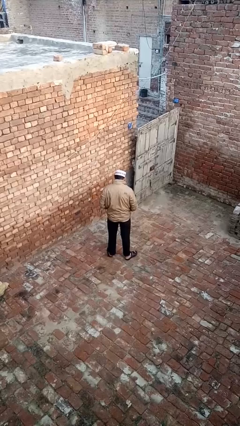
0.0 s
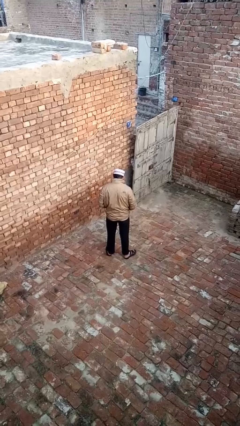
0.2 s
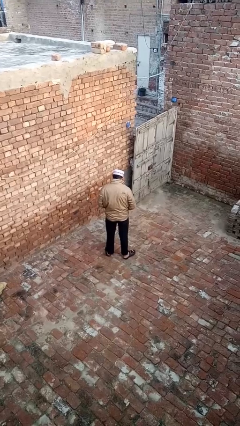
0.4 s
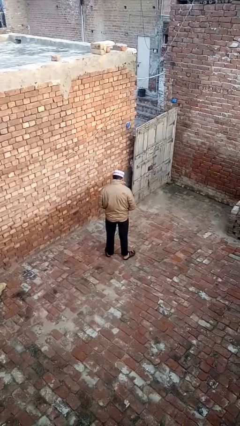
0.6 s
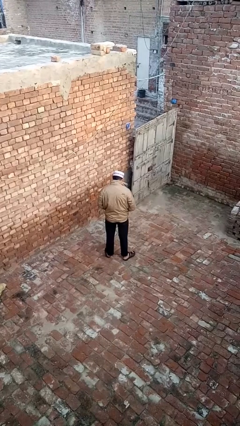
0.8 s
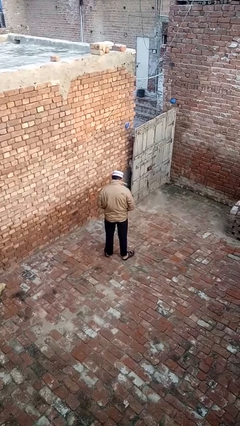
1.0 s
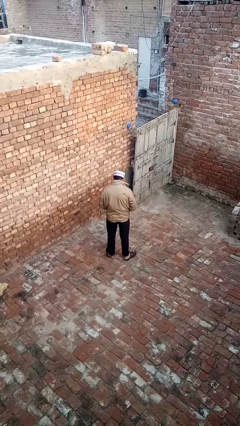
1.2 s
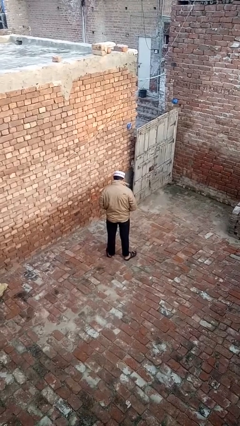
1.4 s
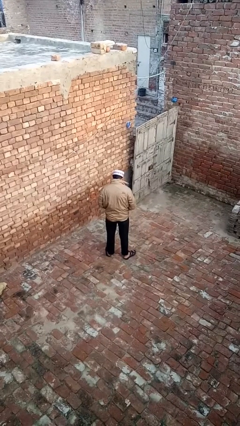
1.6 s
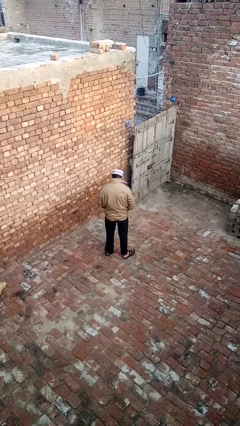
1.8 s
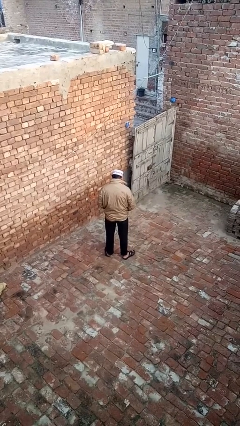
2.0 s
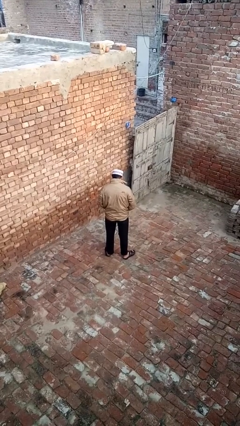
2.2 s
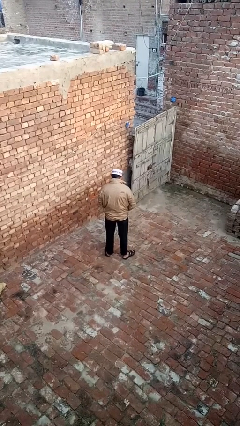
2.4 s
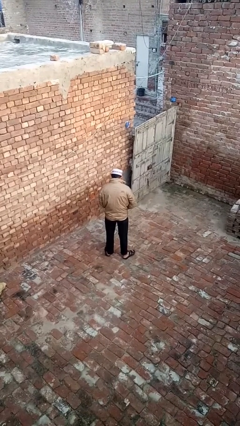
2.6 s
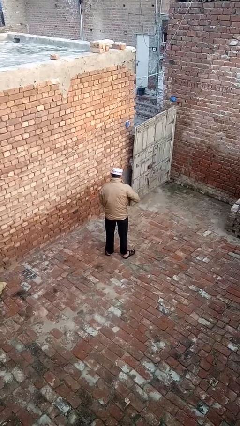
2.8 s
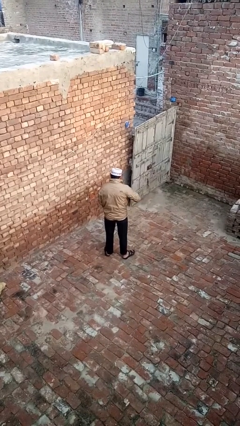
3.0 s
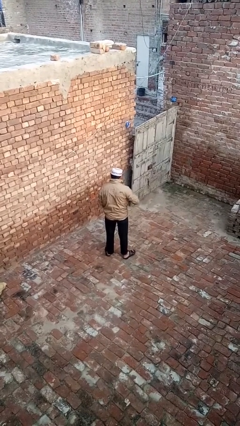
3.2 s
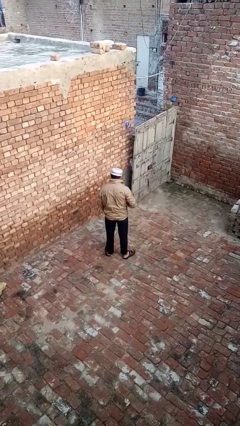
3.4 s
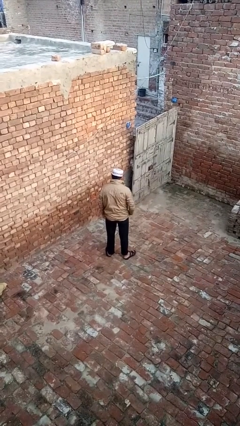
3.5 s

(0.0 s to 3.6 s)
person zips up jacket

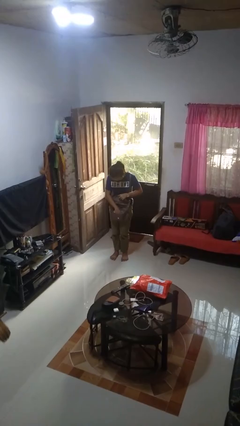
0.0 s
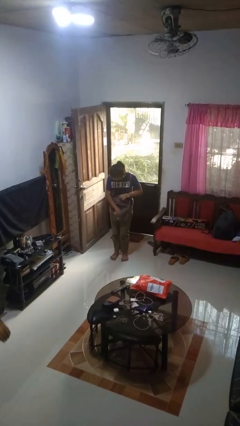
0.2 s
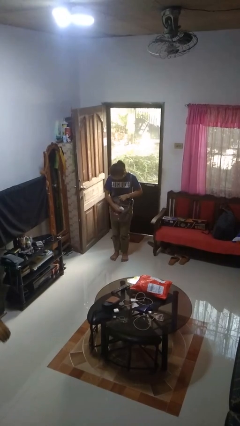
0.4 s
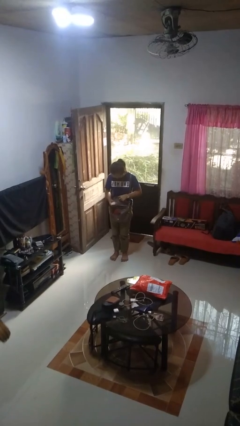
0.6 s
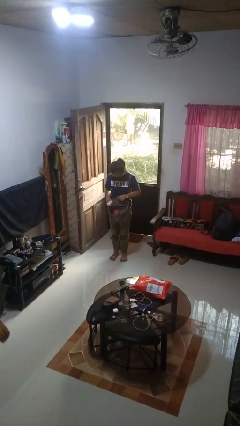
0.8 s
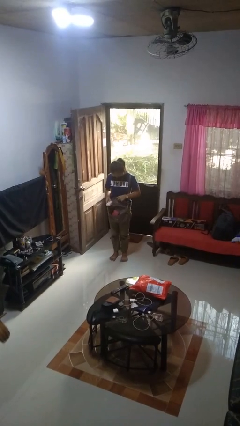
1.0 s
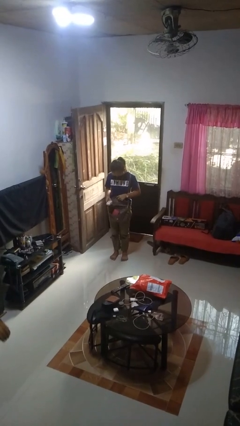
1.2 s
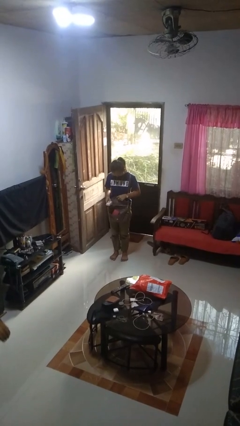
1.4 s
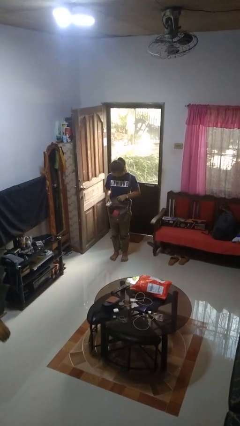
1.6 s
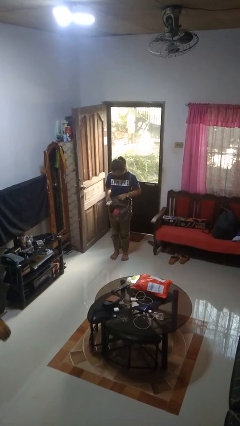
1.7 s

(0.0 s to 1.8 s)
person takes object from purse

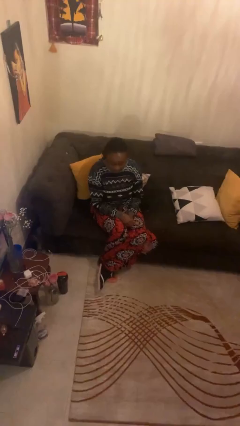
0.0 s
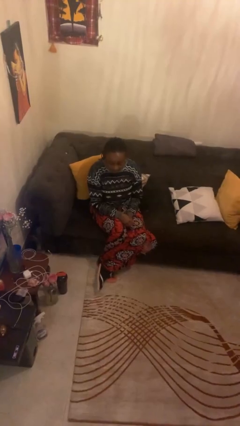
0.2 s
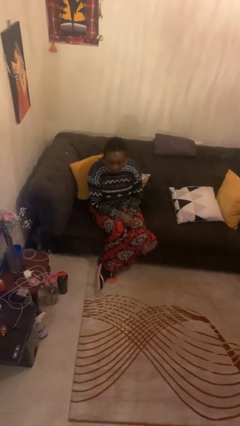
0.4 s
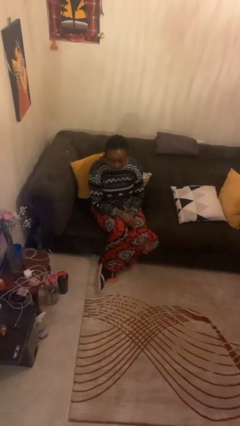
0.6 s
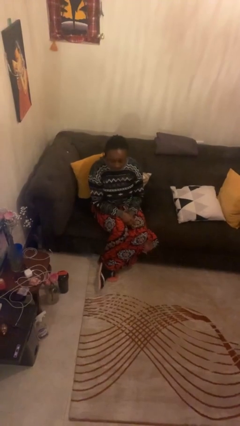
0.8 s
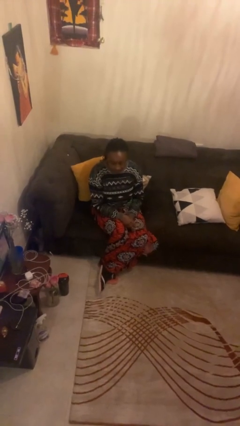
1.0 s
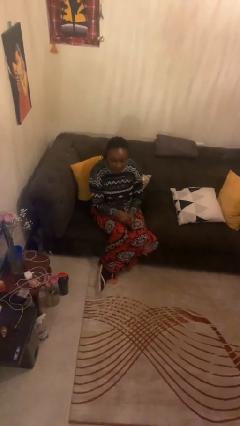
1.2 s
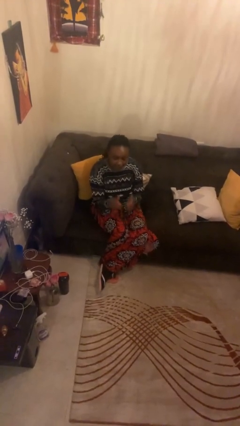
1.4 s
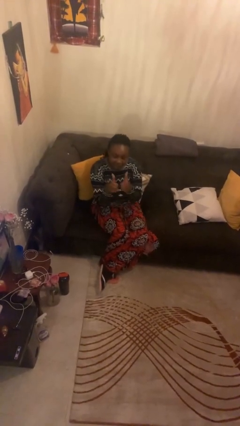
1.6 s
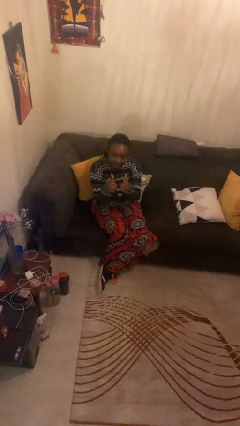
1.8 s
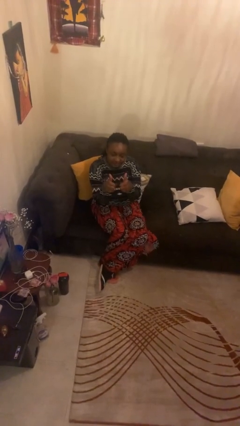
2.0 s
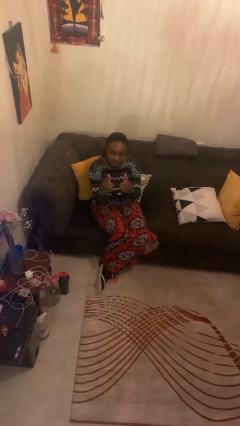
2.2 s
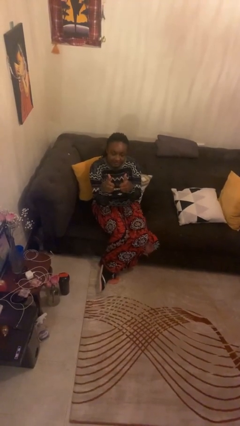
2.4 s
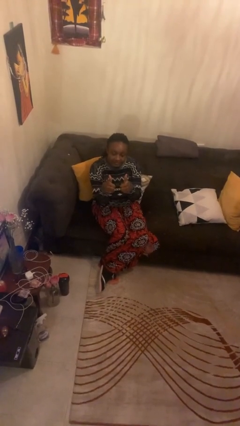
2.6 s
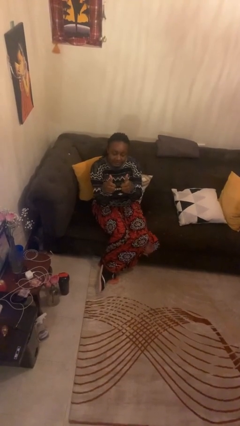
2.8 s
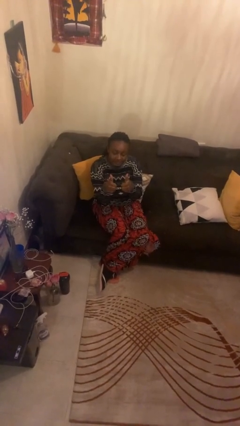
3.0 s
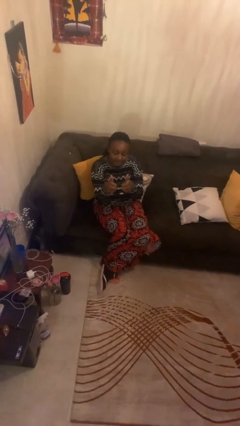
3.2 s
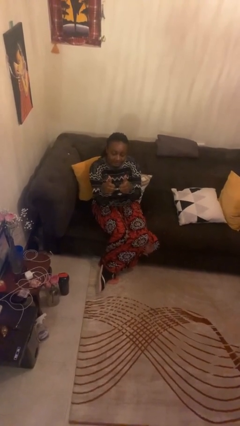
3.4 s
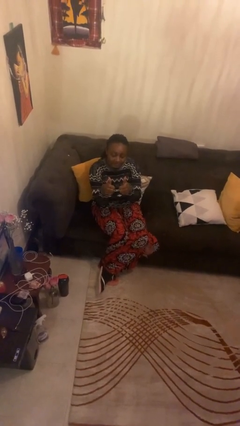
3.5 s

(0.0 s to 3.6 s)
person gestures thumbs up

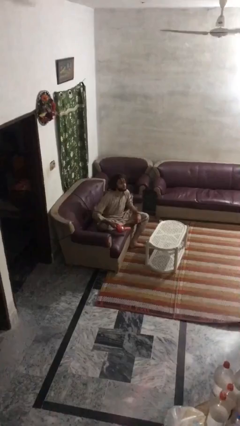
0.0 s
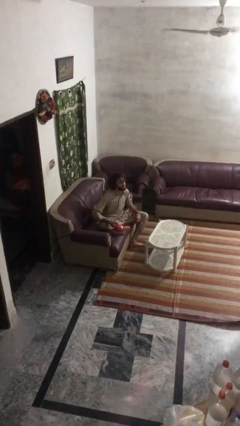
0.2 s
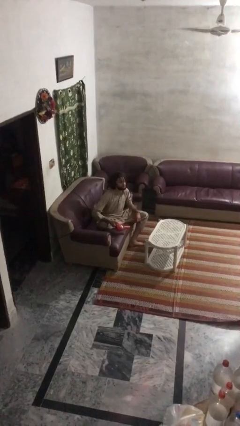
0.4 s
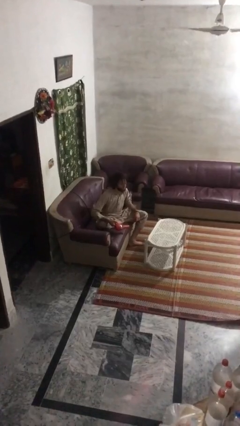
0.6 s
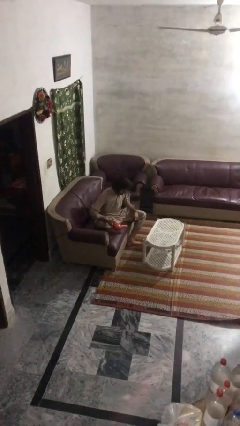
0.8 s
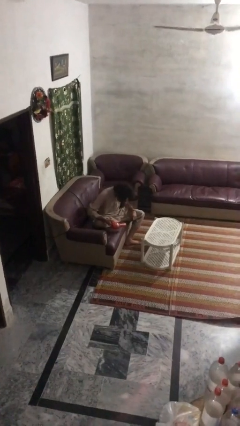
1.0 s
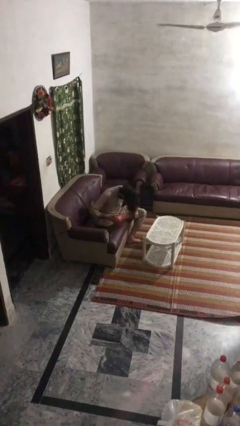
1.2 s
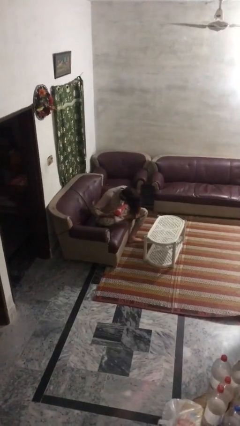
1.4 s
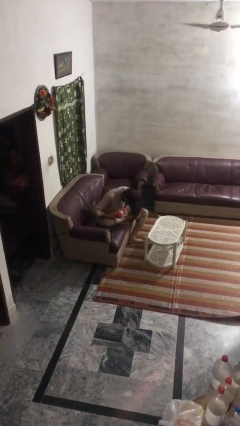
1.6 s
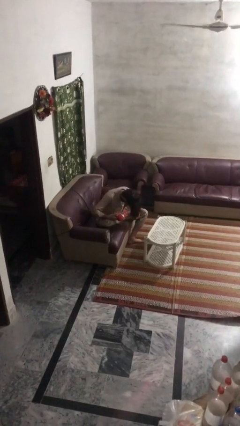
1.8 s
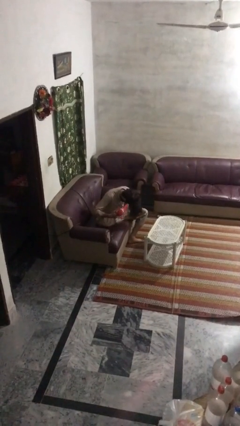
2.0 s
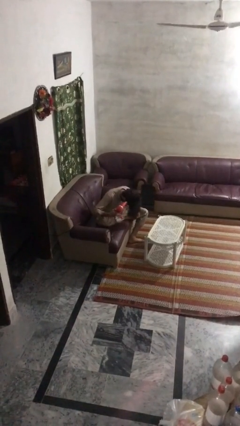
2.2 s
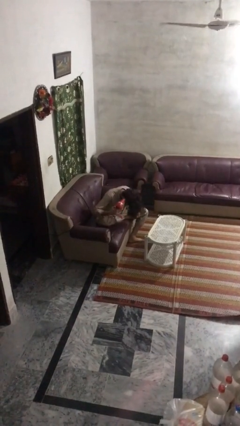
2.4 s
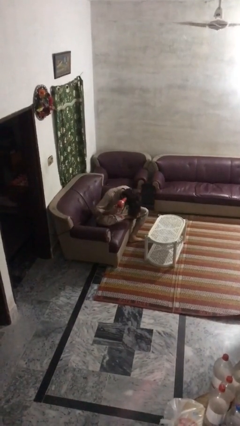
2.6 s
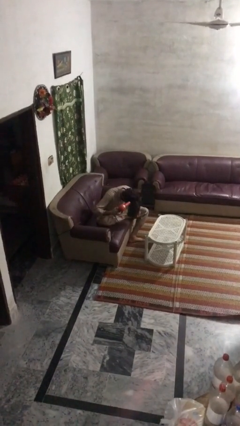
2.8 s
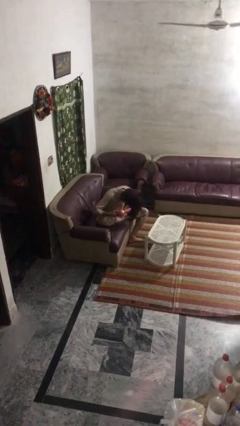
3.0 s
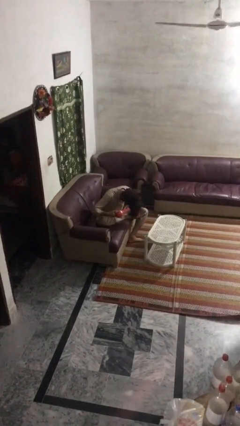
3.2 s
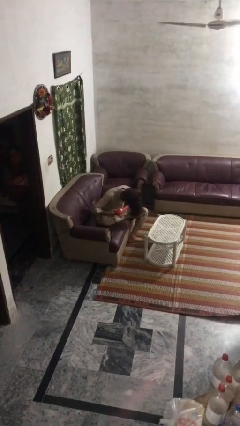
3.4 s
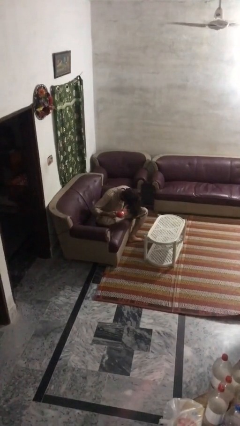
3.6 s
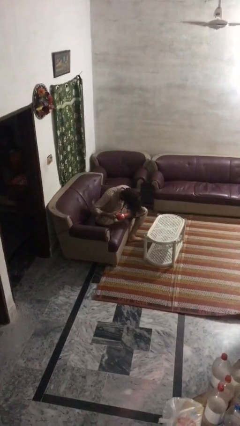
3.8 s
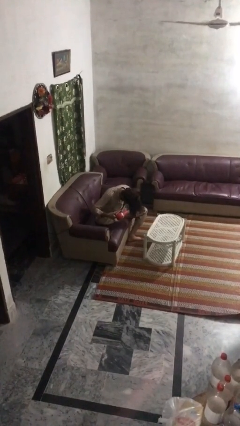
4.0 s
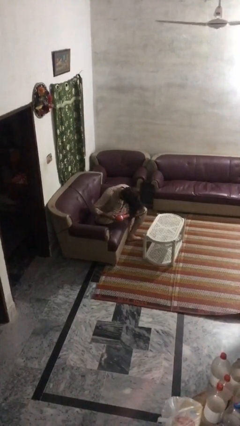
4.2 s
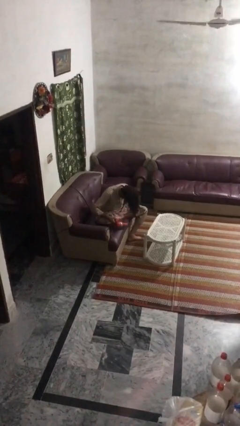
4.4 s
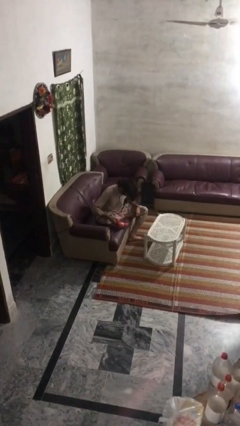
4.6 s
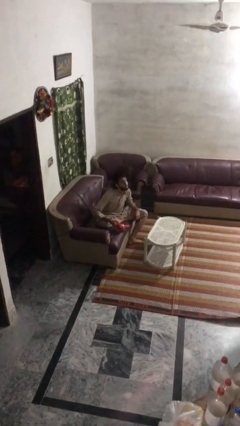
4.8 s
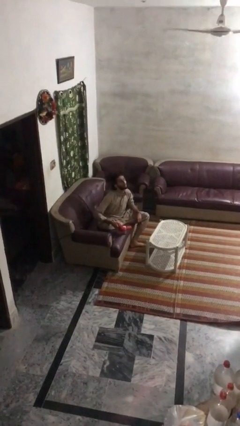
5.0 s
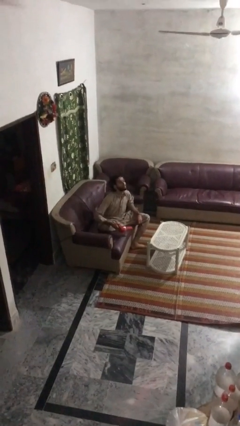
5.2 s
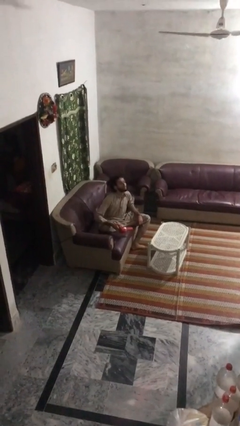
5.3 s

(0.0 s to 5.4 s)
person dries hair with hairdryer

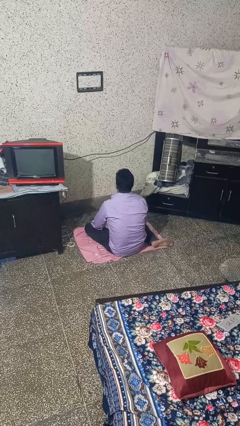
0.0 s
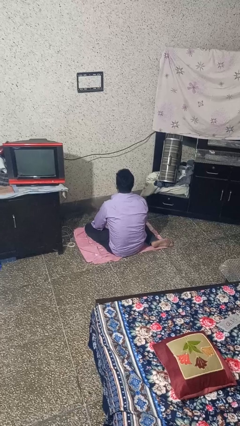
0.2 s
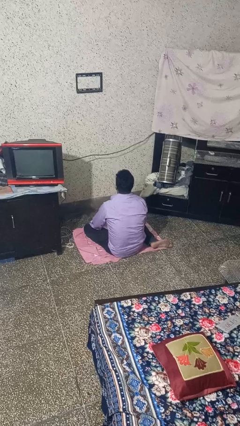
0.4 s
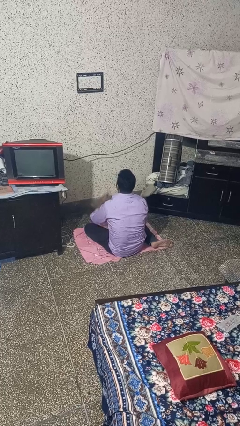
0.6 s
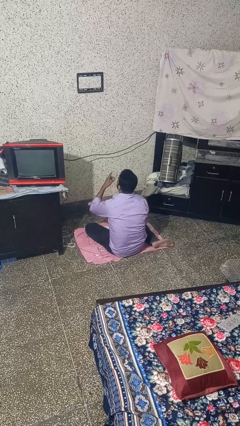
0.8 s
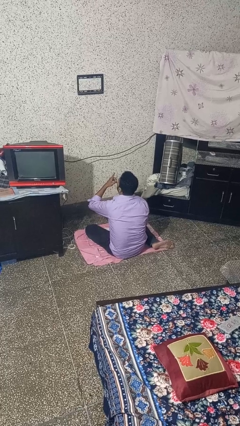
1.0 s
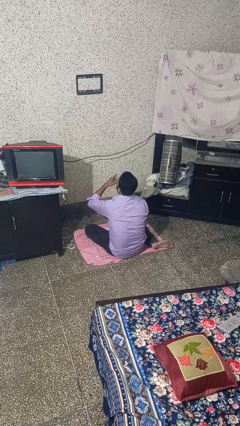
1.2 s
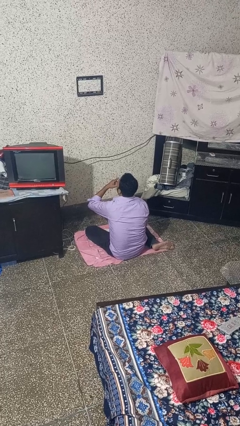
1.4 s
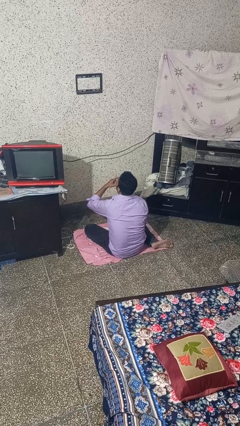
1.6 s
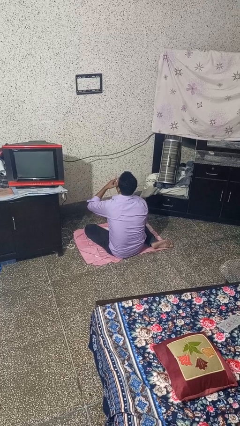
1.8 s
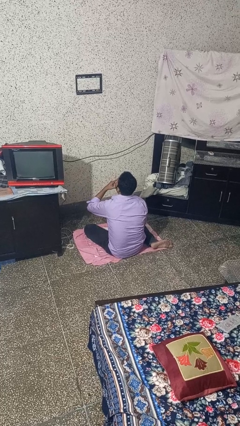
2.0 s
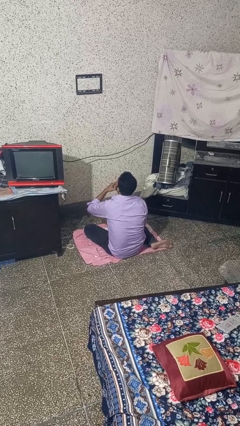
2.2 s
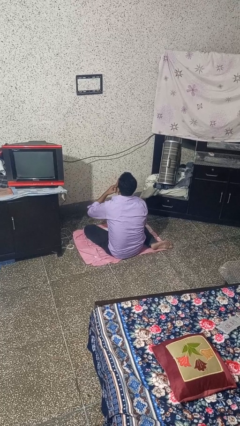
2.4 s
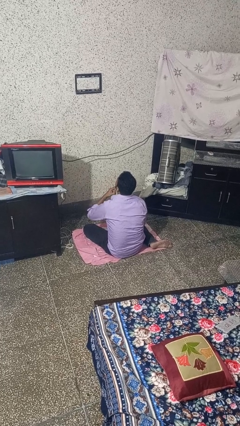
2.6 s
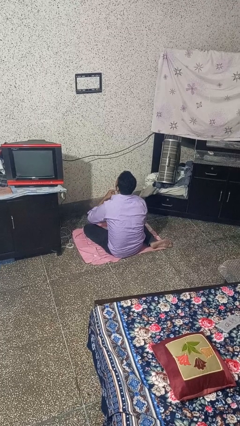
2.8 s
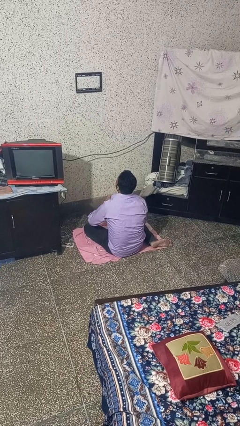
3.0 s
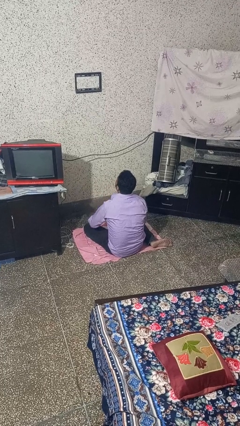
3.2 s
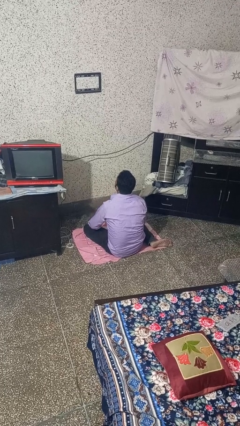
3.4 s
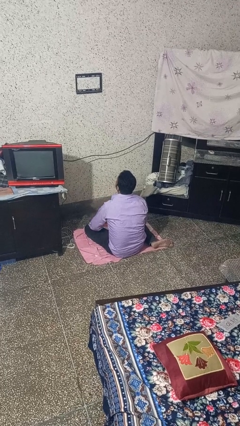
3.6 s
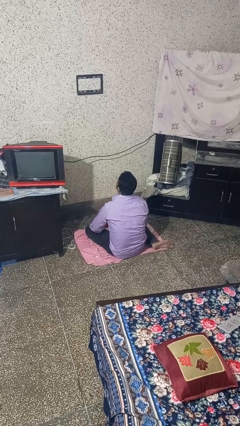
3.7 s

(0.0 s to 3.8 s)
person licks fingers
